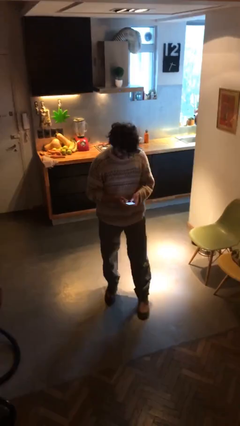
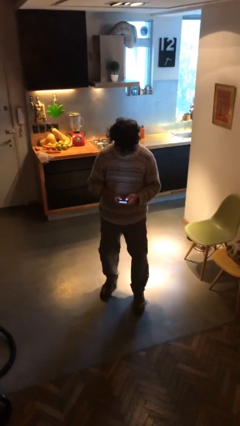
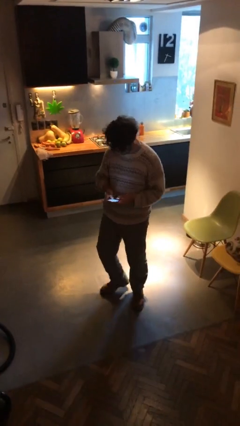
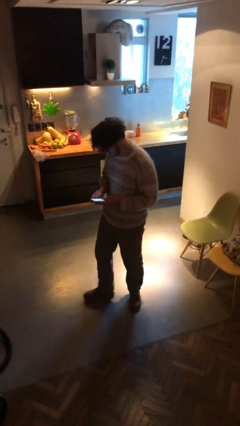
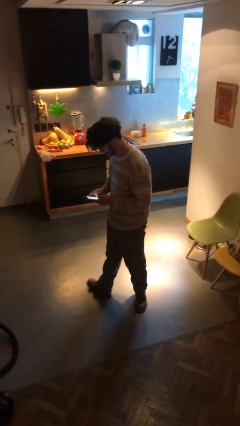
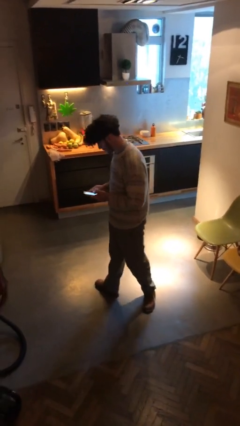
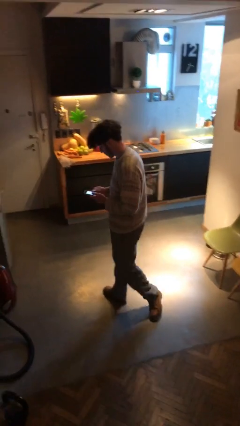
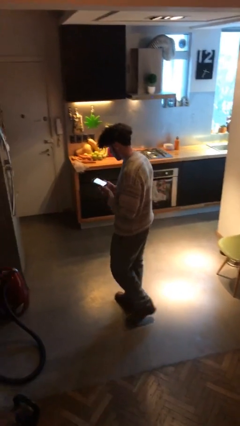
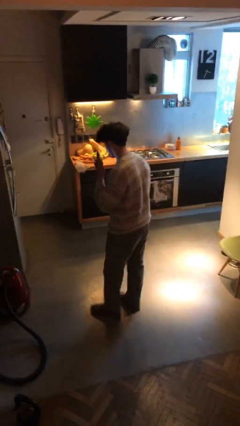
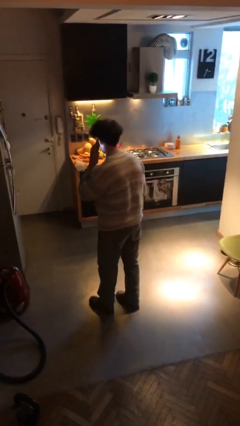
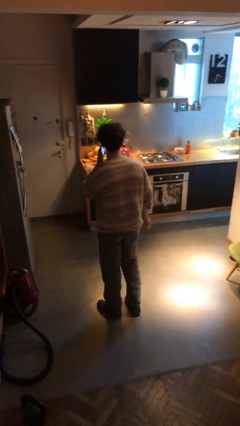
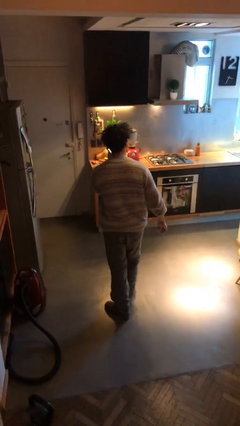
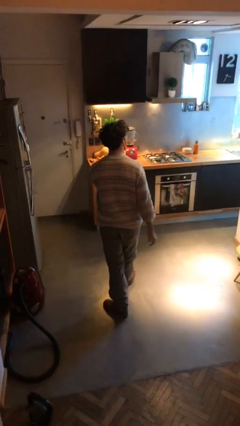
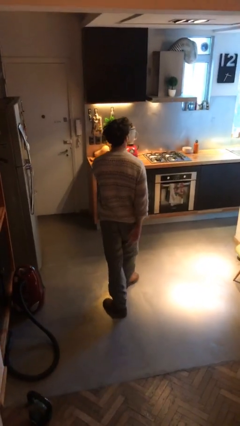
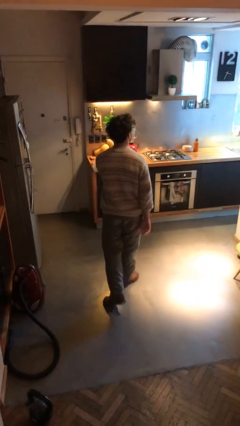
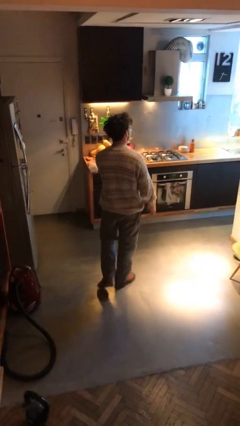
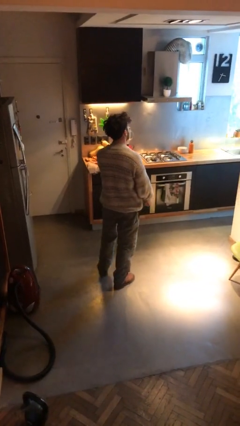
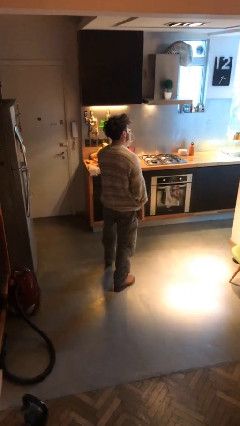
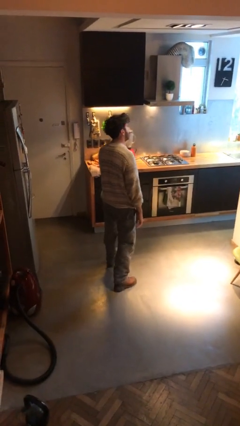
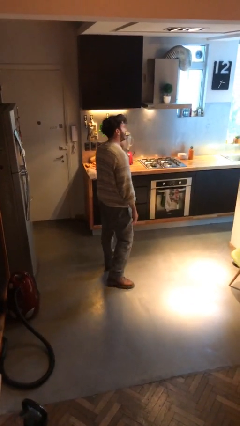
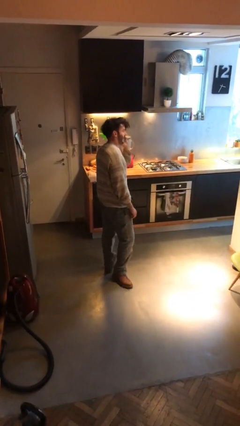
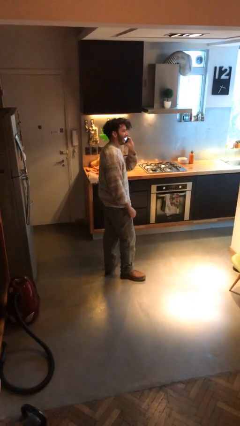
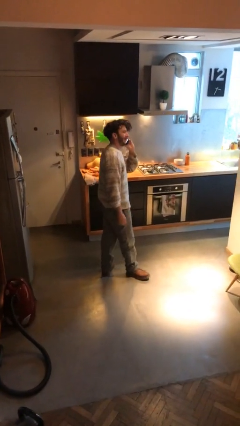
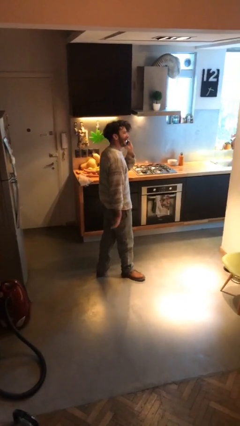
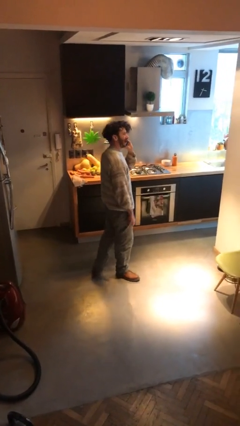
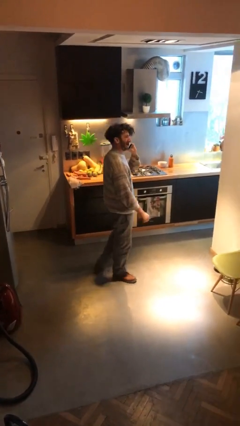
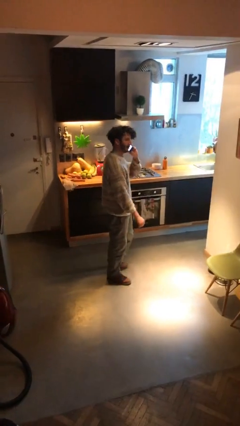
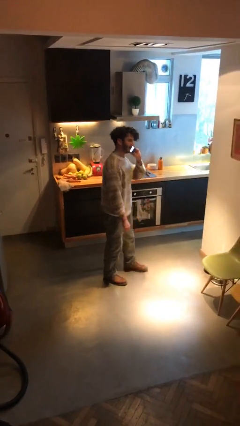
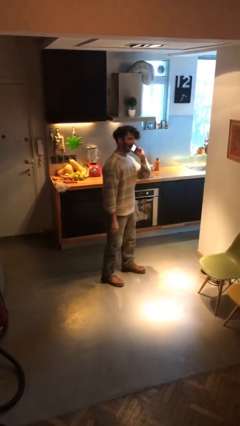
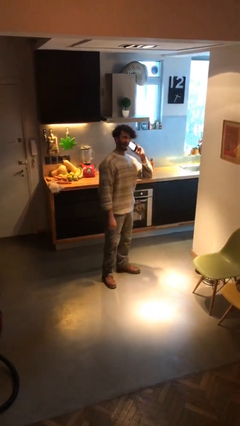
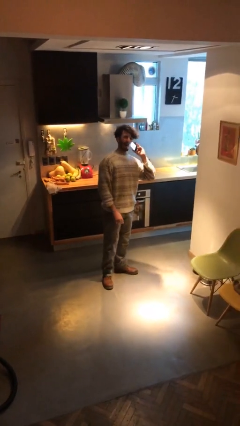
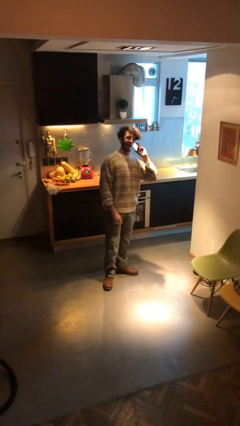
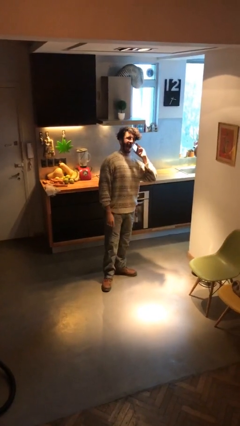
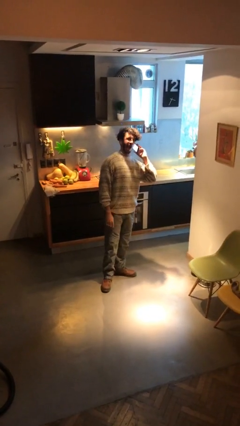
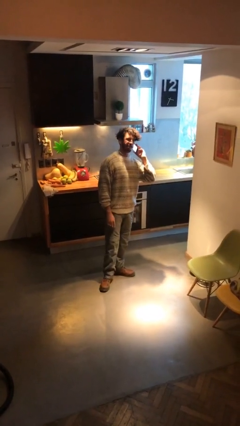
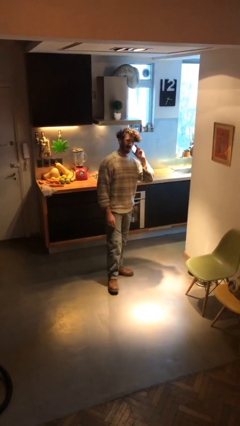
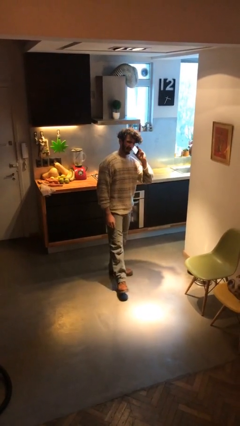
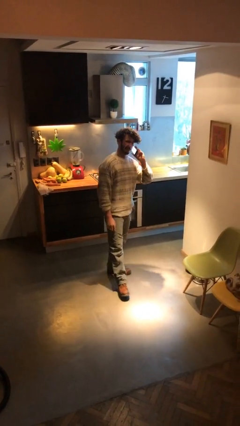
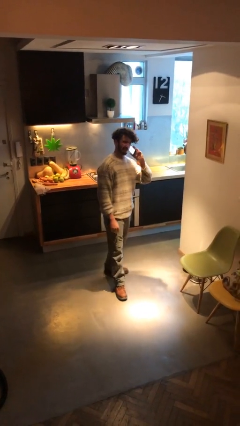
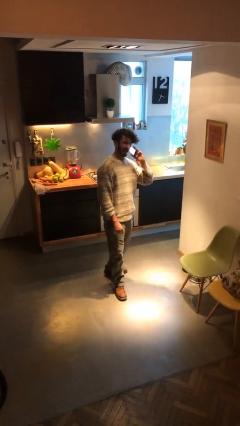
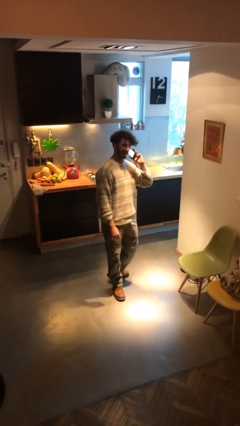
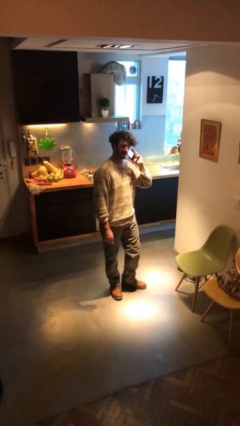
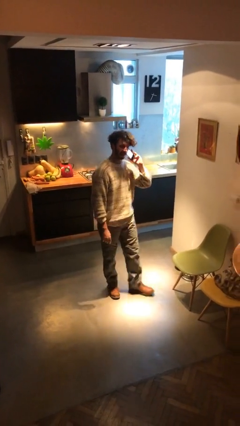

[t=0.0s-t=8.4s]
person talks on phone

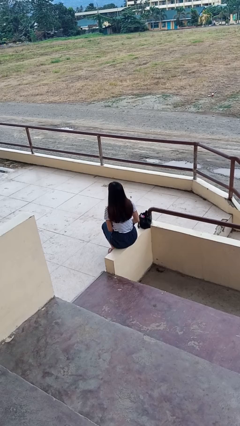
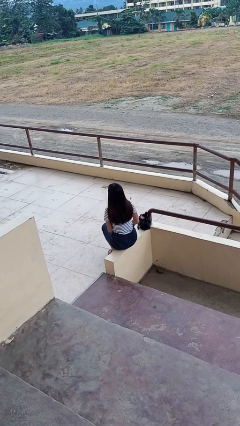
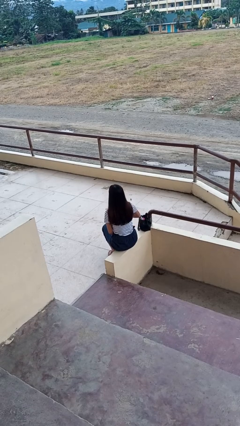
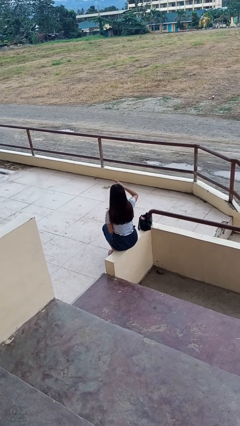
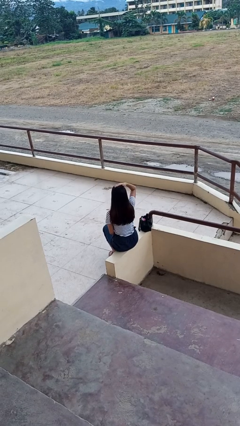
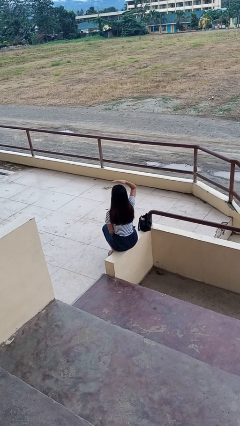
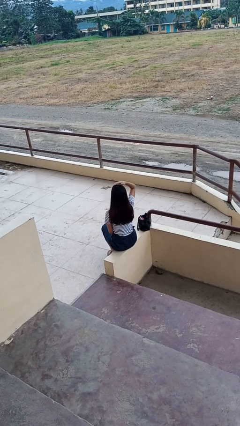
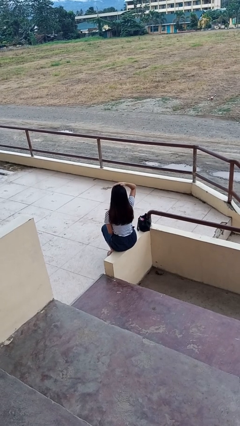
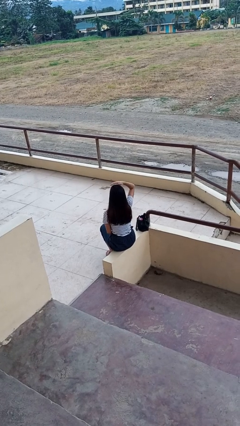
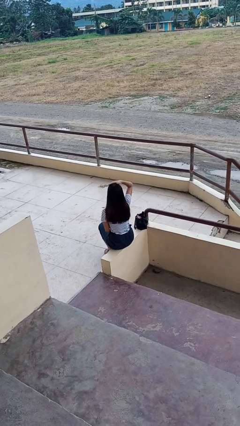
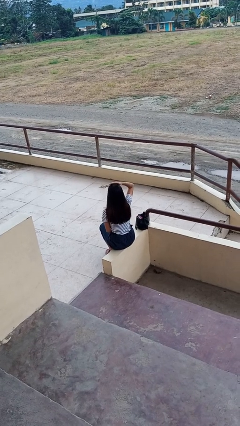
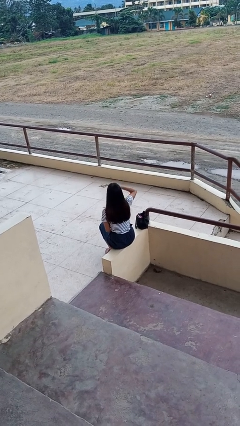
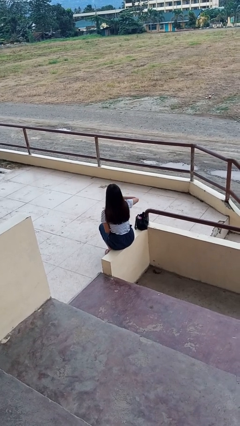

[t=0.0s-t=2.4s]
person pats head

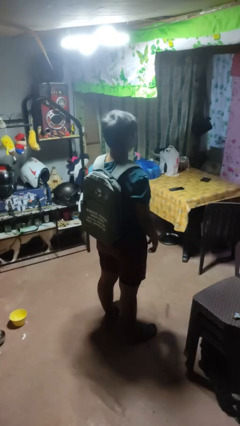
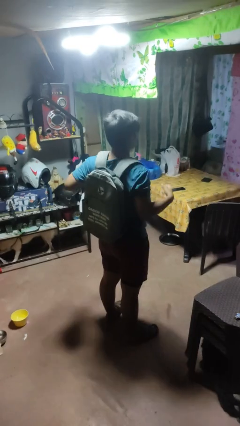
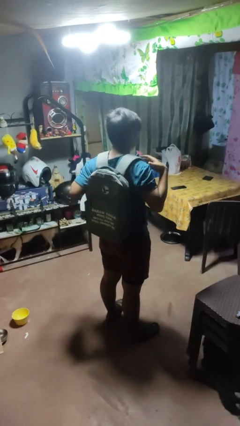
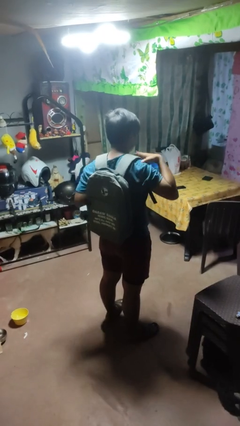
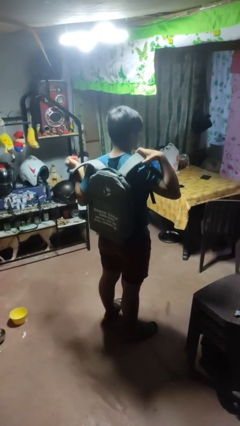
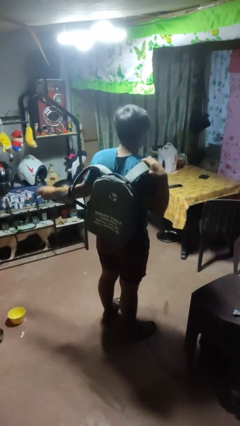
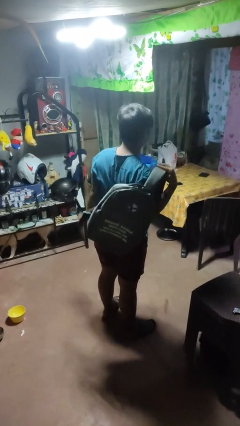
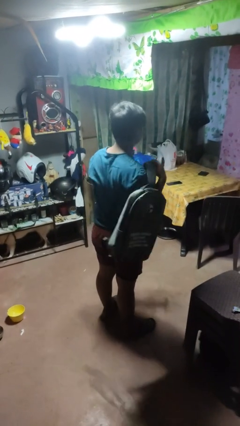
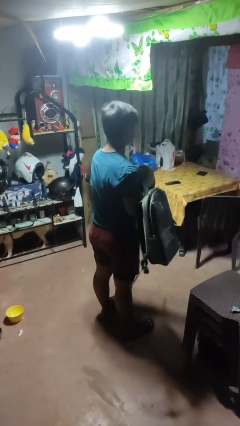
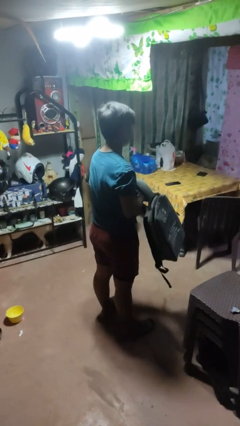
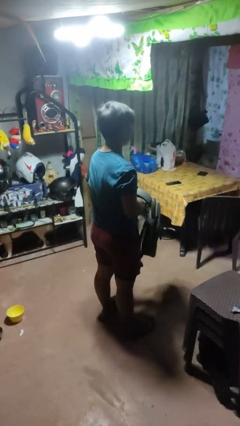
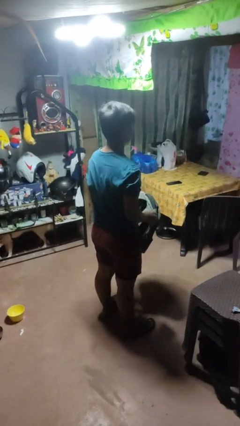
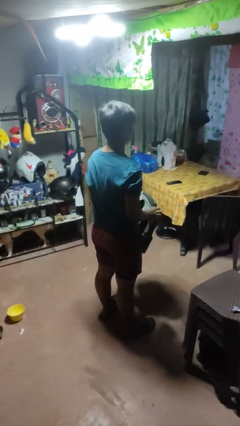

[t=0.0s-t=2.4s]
person takes off backpack

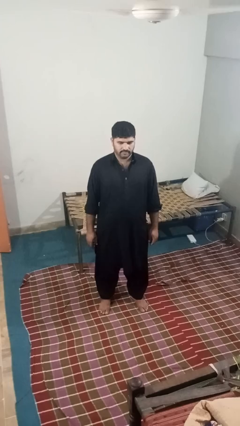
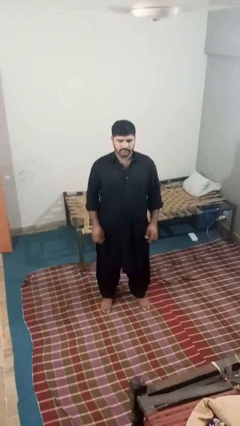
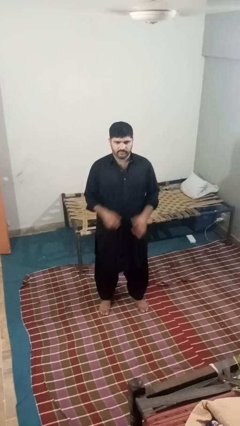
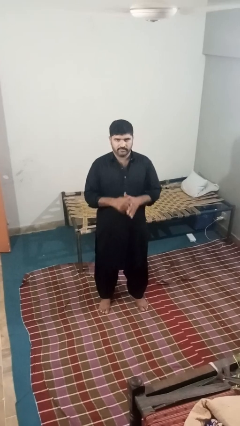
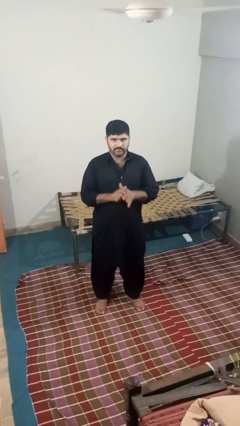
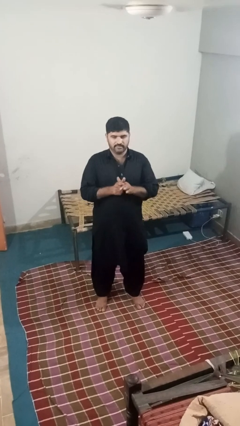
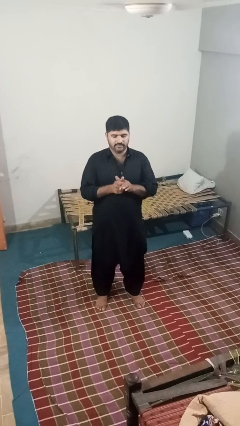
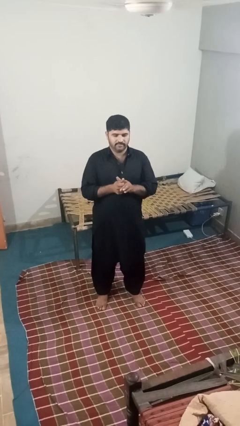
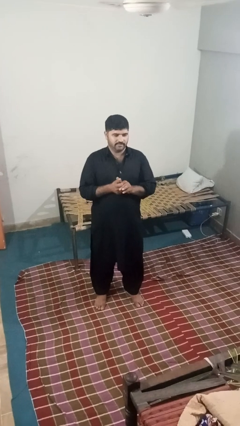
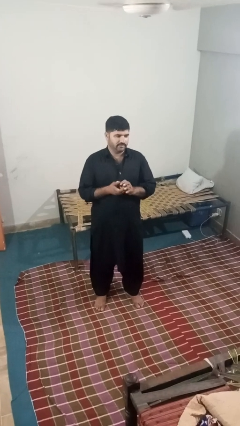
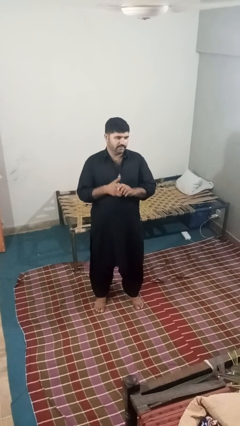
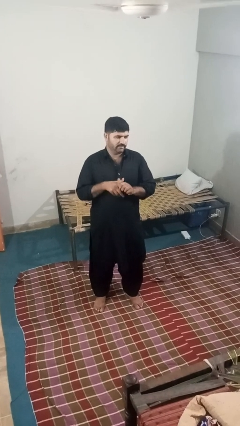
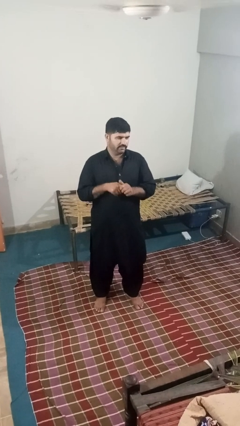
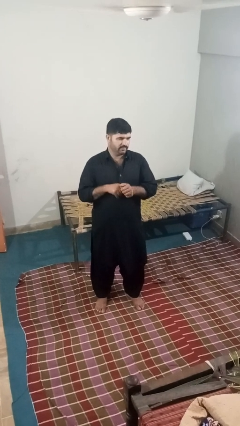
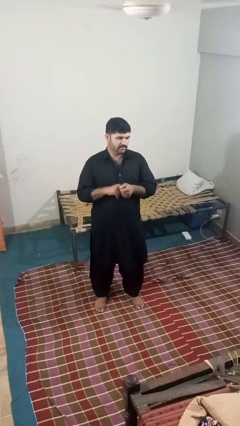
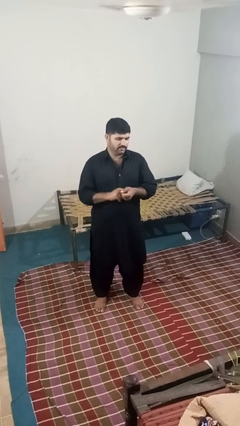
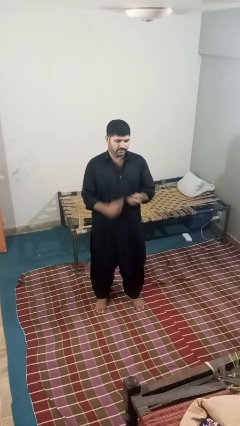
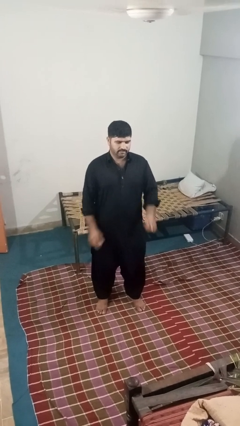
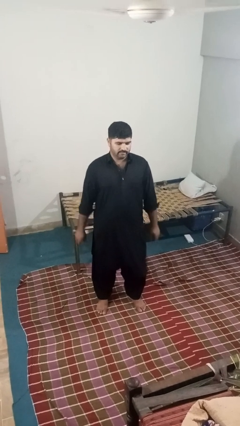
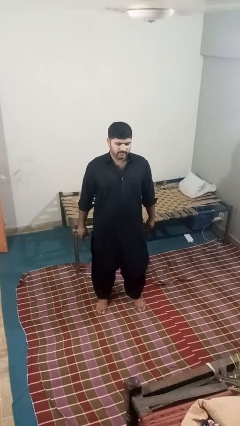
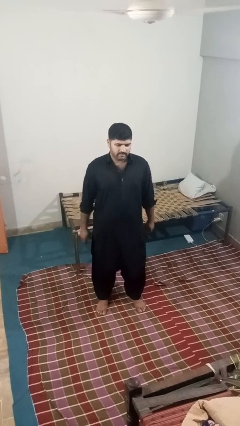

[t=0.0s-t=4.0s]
person cracks knuckles

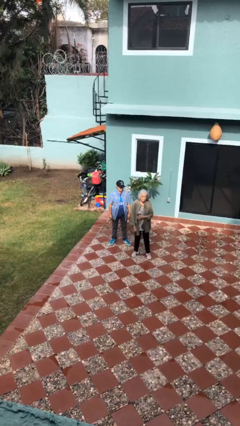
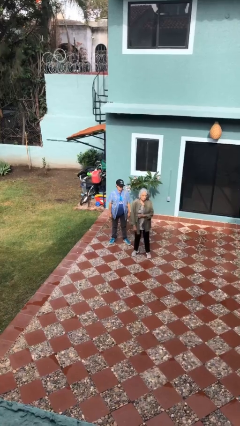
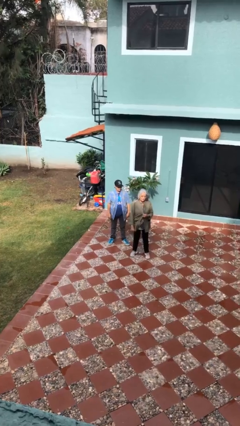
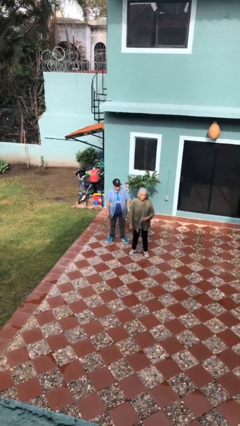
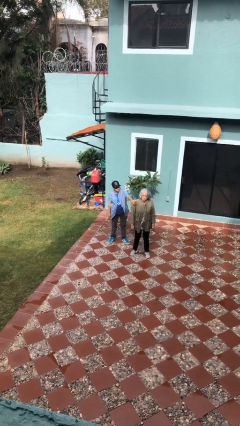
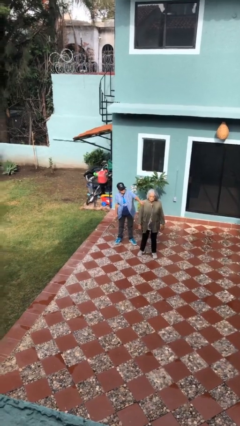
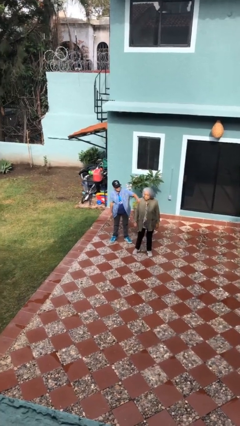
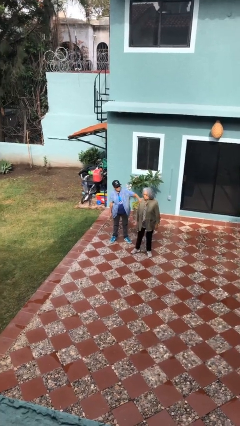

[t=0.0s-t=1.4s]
person grabs person by shoulder
